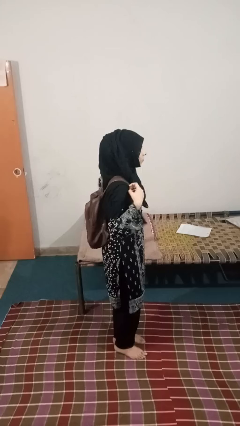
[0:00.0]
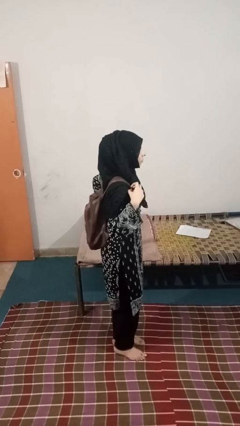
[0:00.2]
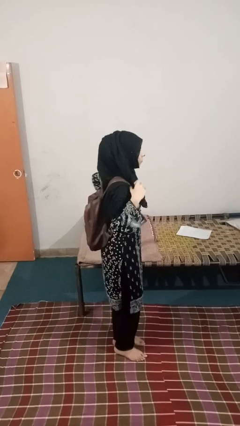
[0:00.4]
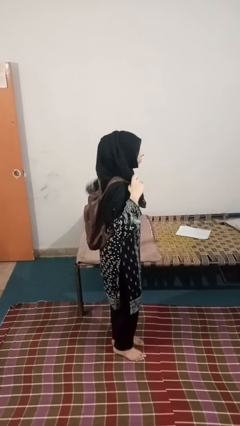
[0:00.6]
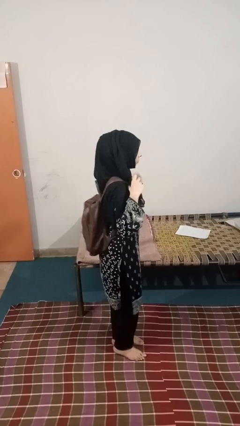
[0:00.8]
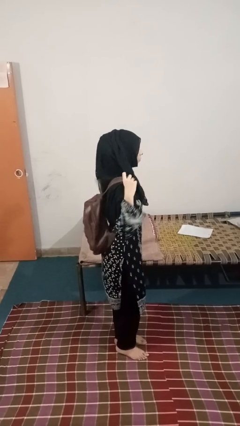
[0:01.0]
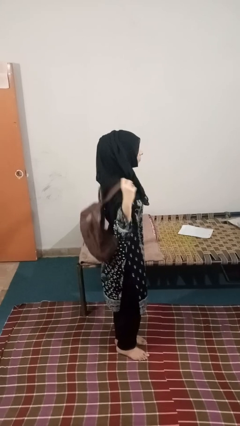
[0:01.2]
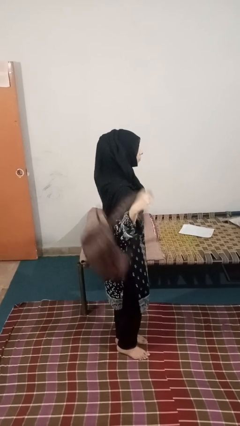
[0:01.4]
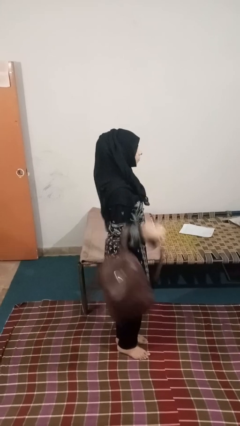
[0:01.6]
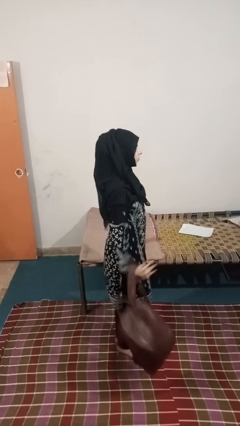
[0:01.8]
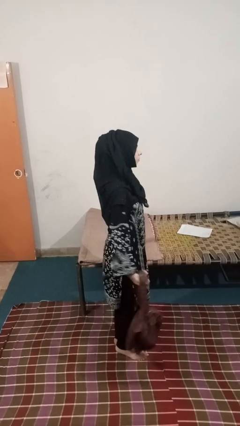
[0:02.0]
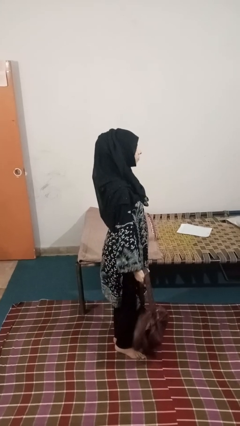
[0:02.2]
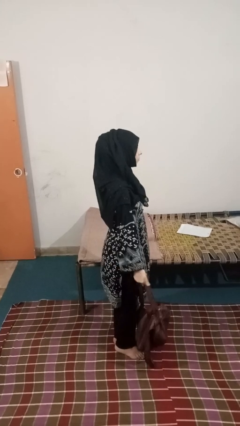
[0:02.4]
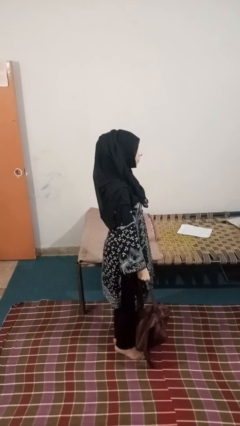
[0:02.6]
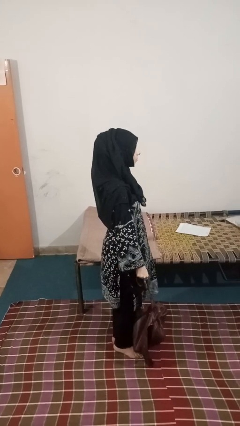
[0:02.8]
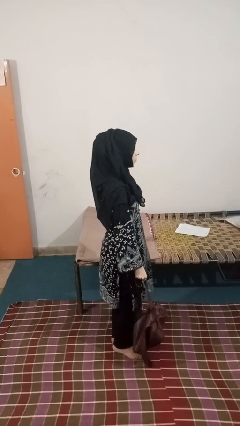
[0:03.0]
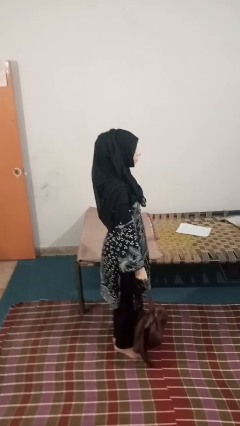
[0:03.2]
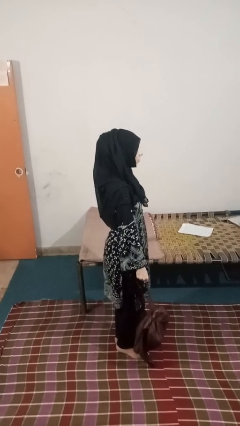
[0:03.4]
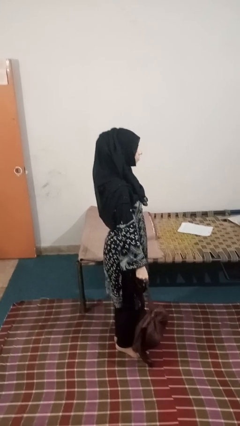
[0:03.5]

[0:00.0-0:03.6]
person takes off backpack

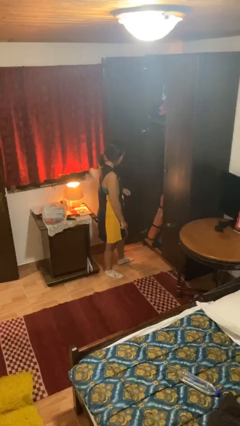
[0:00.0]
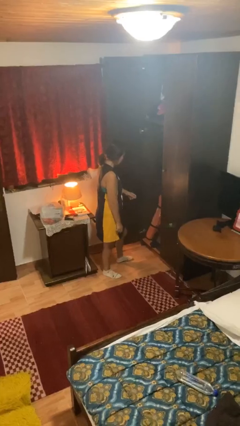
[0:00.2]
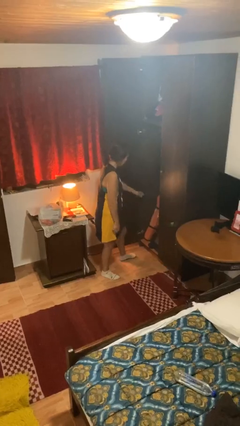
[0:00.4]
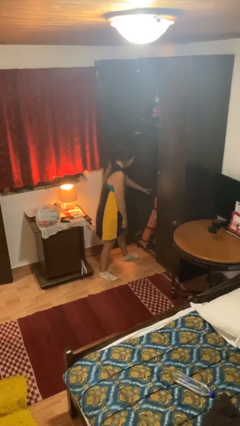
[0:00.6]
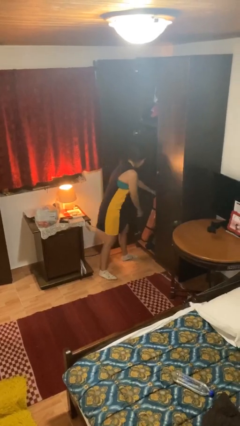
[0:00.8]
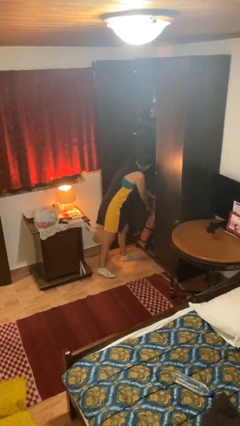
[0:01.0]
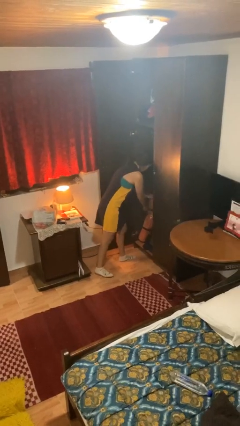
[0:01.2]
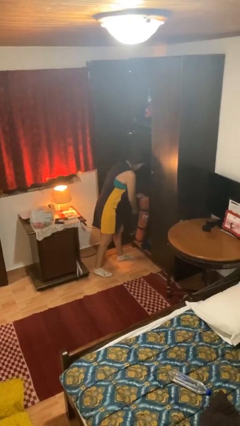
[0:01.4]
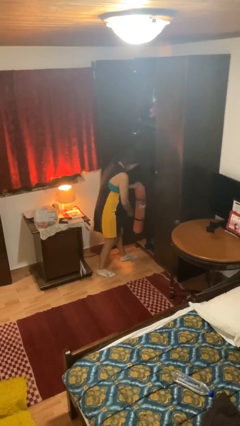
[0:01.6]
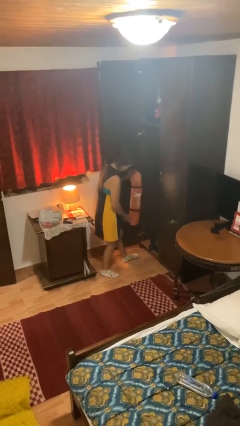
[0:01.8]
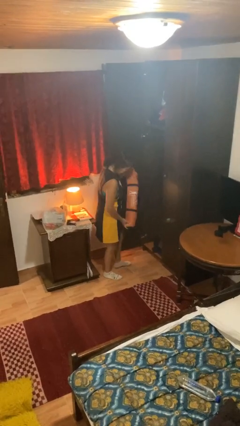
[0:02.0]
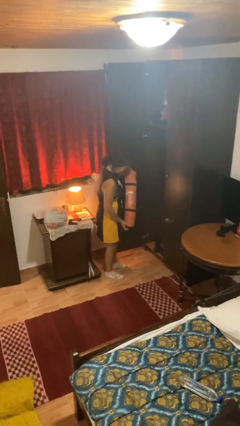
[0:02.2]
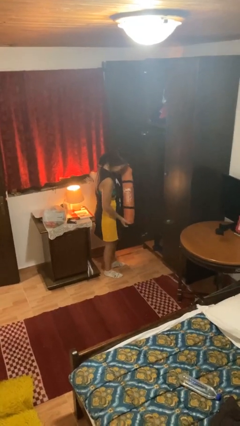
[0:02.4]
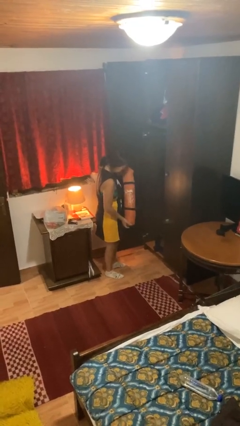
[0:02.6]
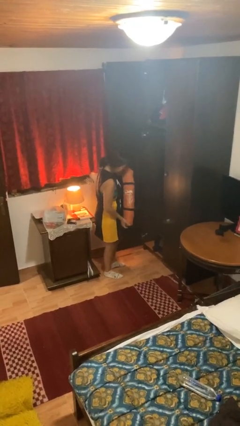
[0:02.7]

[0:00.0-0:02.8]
person picks up object from cabinet

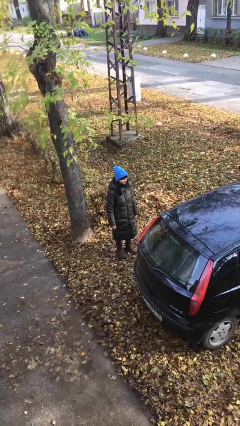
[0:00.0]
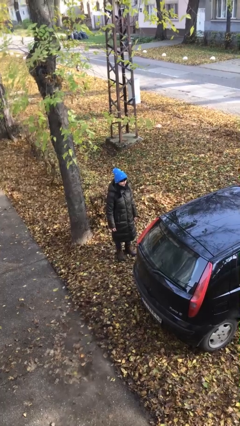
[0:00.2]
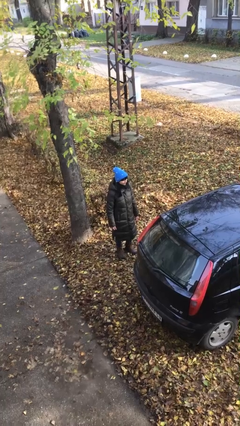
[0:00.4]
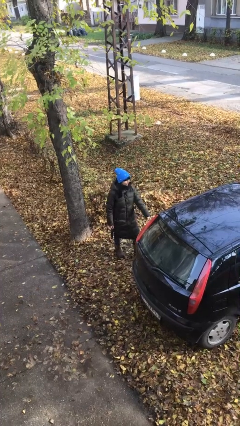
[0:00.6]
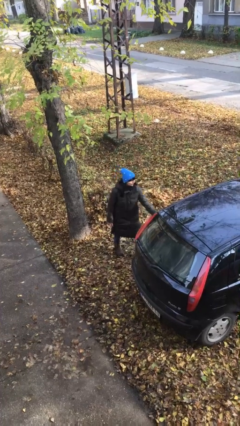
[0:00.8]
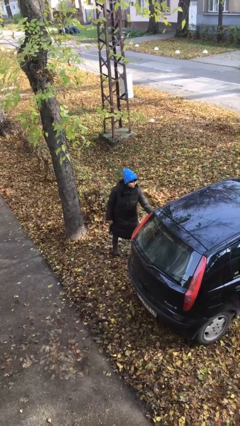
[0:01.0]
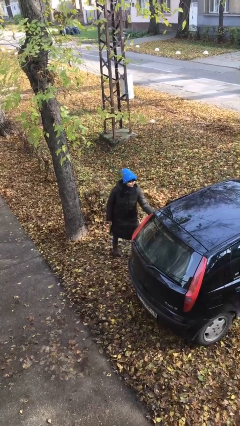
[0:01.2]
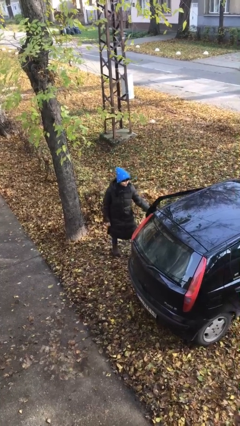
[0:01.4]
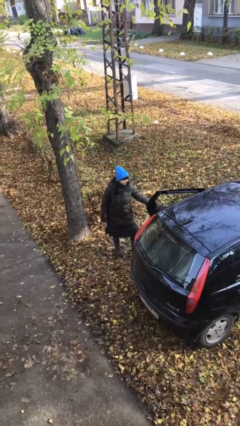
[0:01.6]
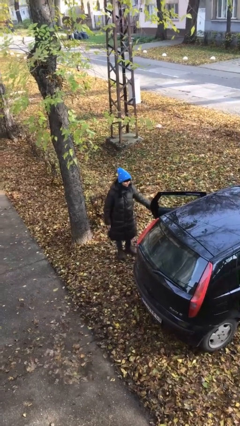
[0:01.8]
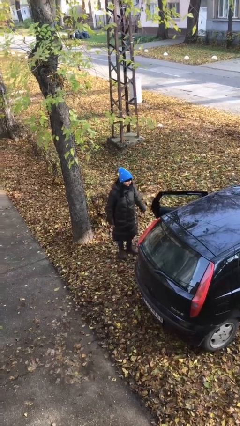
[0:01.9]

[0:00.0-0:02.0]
person opens car door

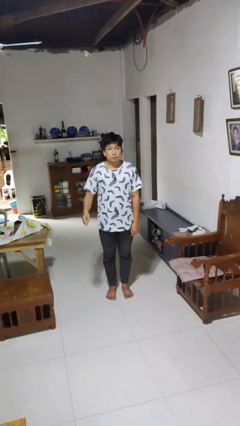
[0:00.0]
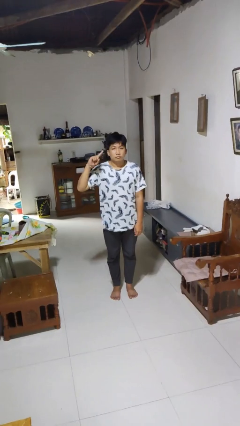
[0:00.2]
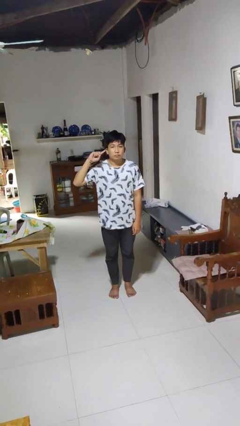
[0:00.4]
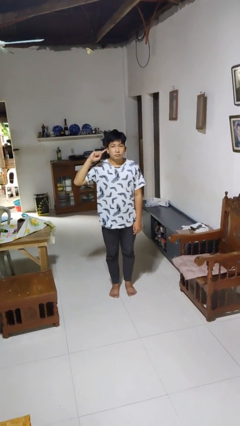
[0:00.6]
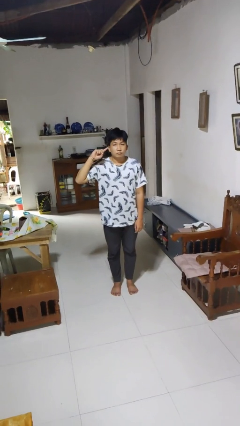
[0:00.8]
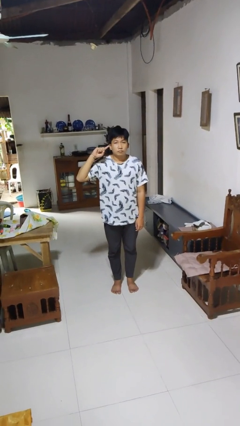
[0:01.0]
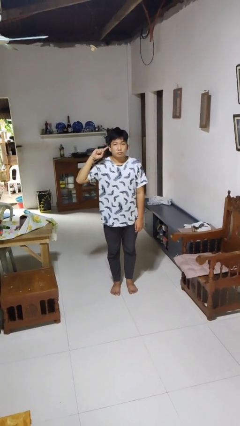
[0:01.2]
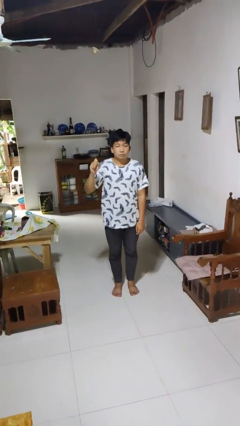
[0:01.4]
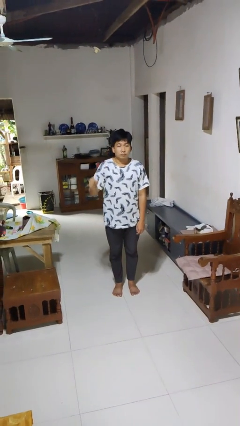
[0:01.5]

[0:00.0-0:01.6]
person gestures listen closely

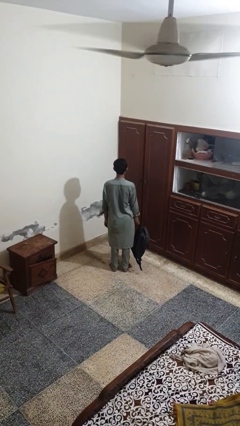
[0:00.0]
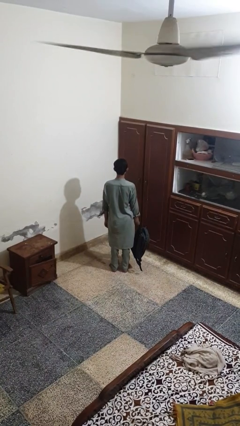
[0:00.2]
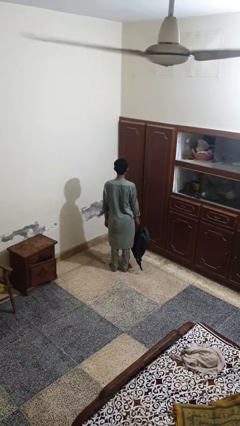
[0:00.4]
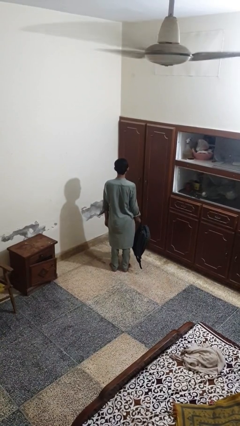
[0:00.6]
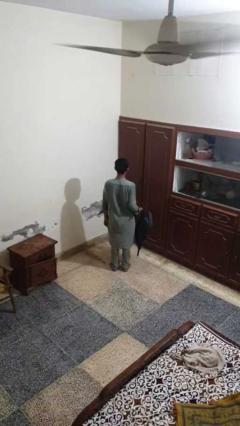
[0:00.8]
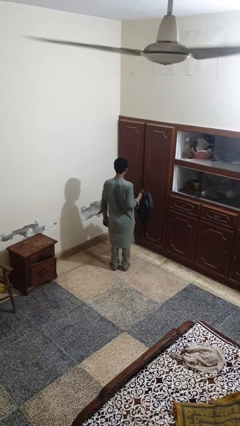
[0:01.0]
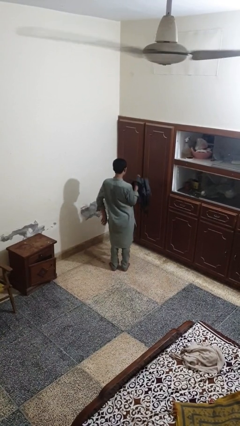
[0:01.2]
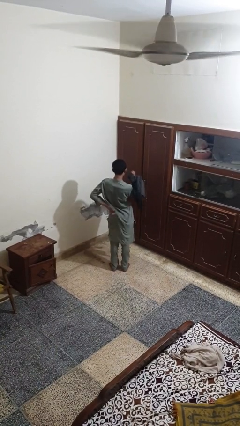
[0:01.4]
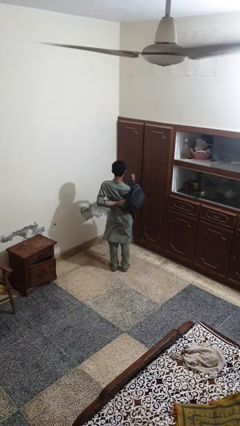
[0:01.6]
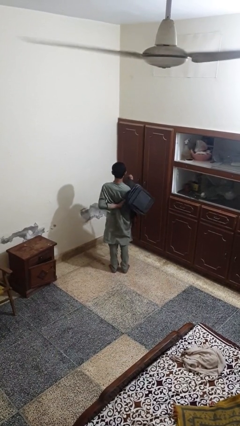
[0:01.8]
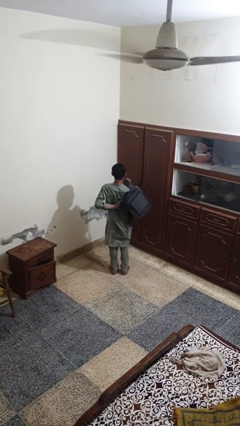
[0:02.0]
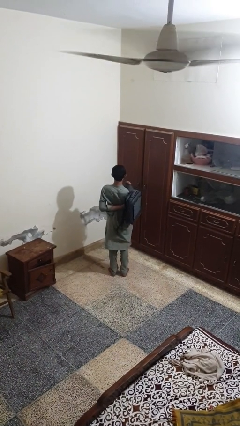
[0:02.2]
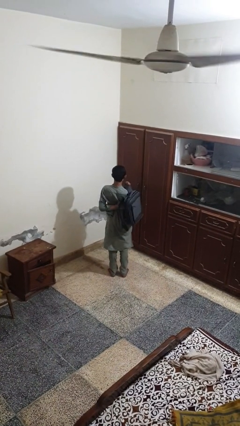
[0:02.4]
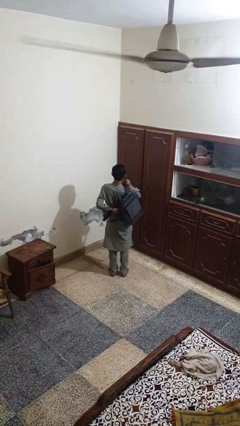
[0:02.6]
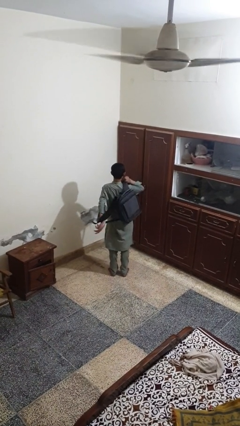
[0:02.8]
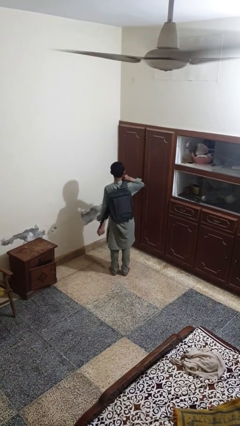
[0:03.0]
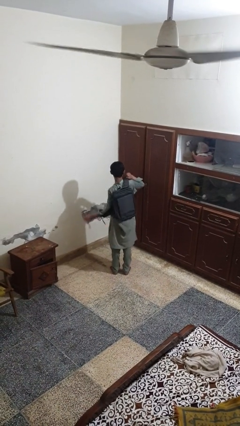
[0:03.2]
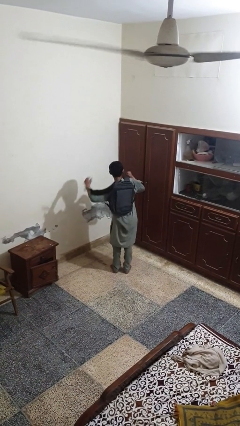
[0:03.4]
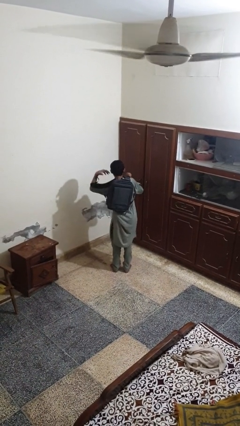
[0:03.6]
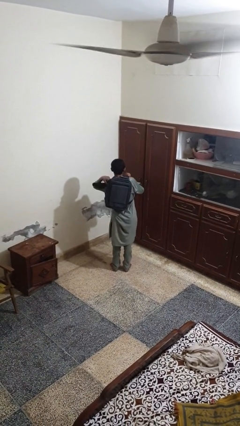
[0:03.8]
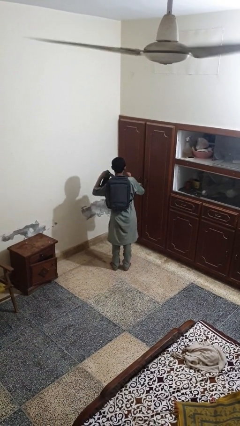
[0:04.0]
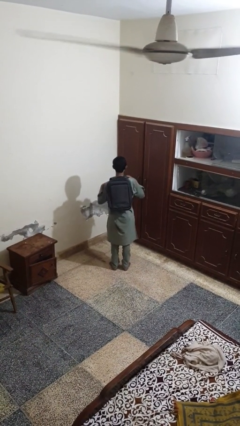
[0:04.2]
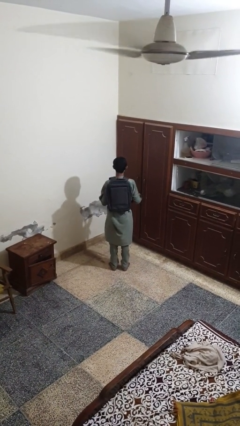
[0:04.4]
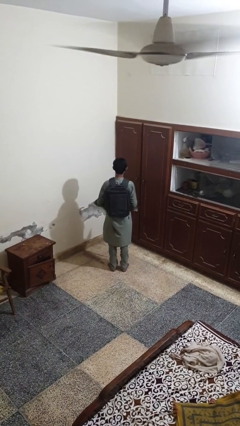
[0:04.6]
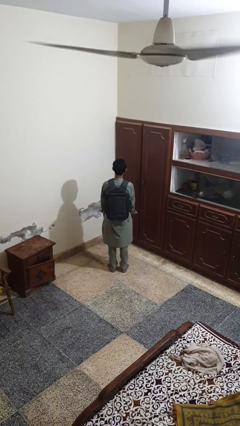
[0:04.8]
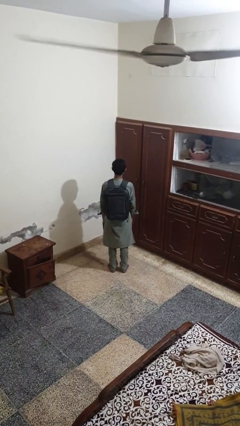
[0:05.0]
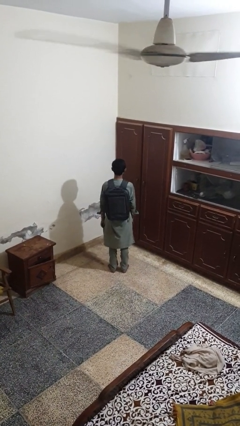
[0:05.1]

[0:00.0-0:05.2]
person puts on backpack

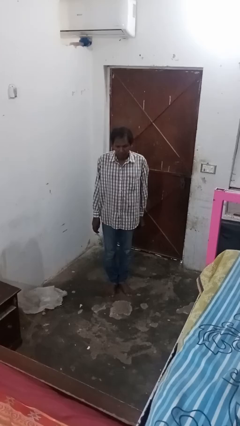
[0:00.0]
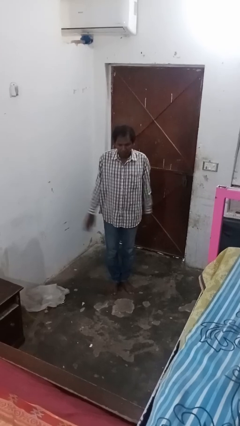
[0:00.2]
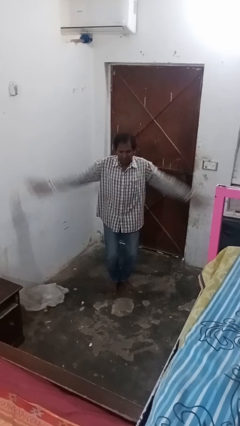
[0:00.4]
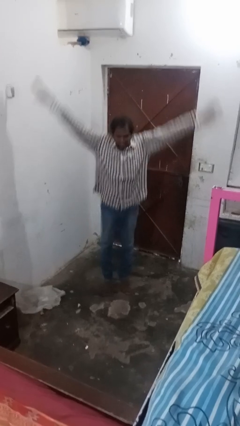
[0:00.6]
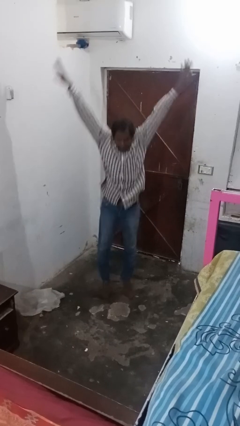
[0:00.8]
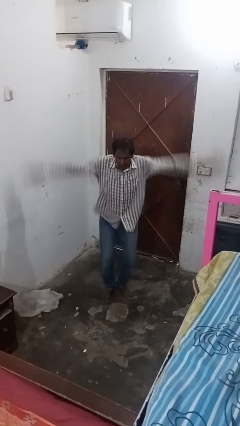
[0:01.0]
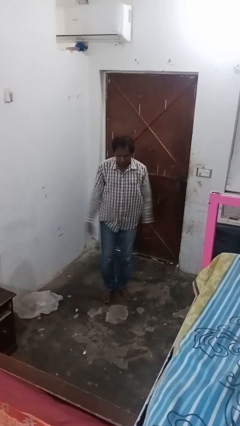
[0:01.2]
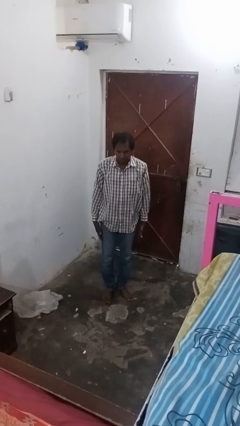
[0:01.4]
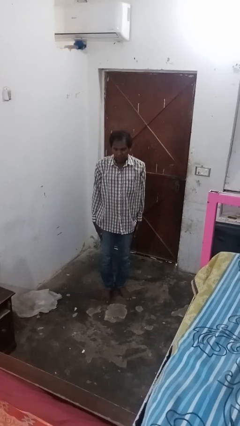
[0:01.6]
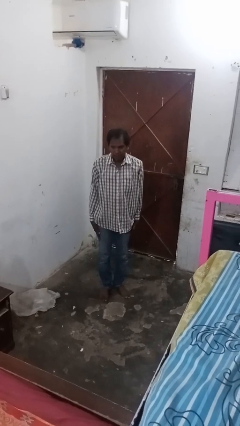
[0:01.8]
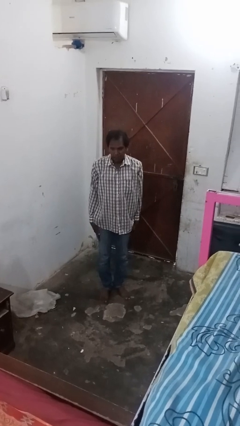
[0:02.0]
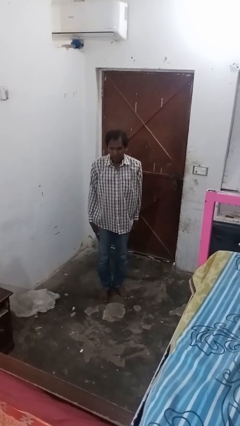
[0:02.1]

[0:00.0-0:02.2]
person exercises with jumping jacks
